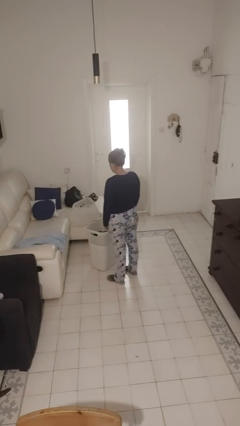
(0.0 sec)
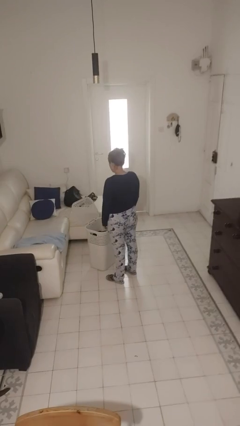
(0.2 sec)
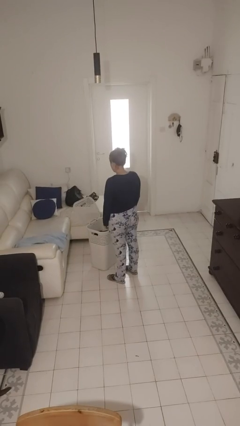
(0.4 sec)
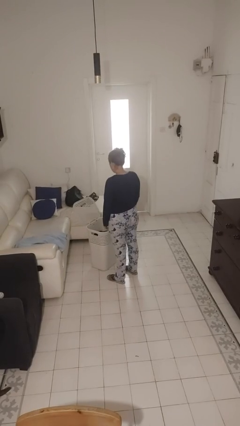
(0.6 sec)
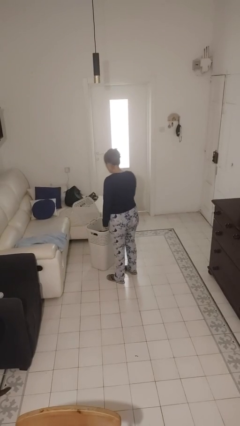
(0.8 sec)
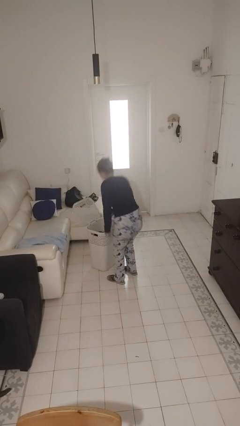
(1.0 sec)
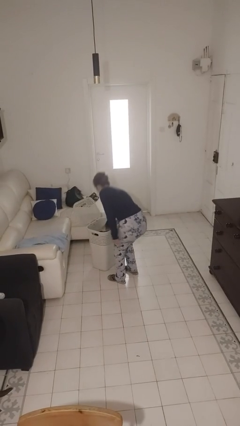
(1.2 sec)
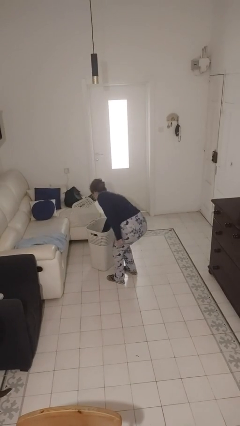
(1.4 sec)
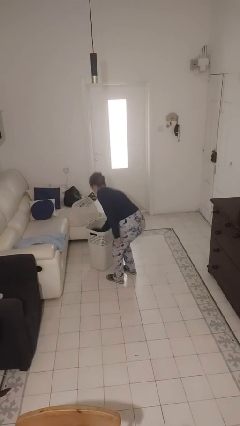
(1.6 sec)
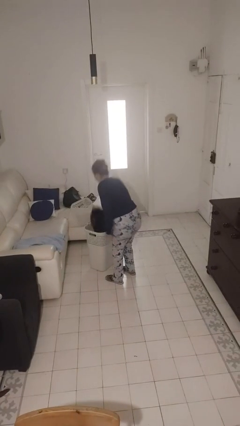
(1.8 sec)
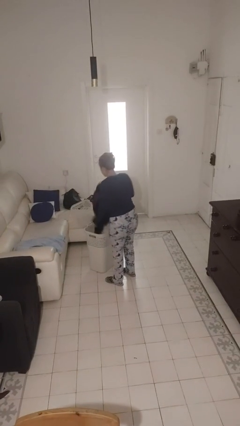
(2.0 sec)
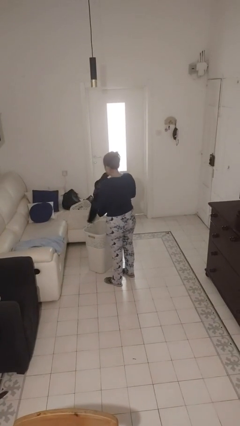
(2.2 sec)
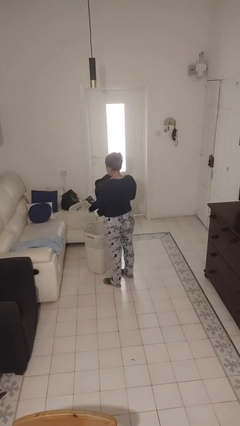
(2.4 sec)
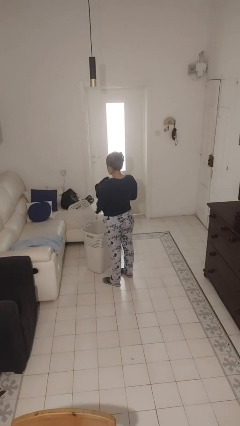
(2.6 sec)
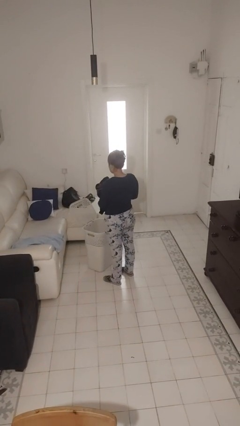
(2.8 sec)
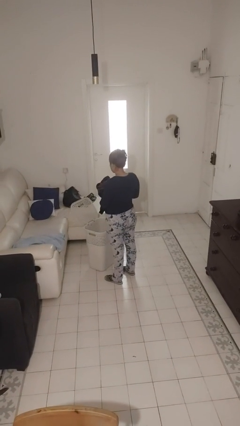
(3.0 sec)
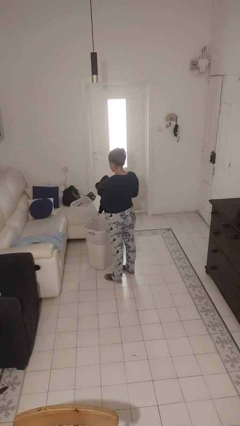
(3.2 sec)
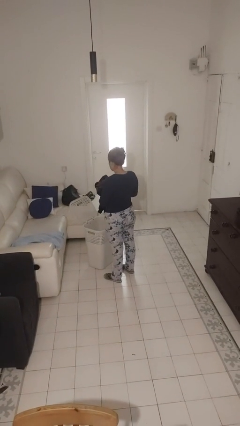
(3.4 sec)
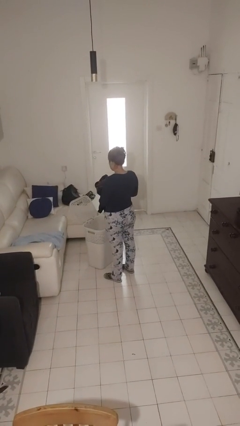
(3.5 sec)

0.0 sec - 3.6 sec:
person takes object from basket

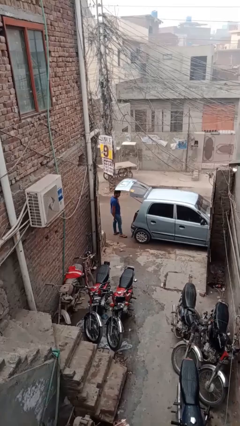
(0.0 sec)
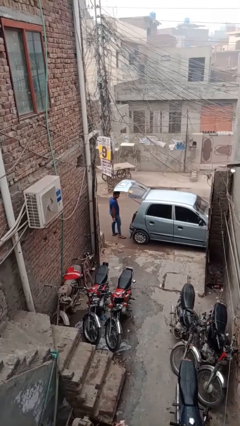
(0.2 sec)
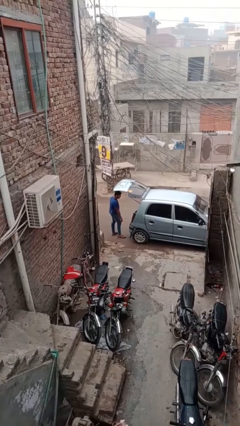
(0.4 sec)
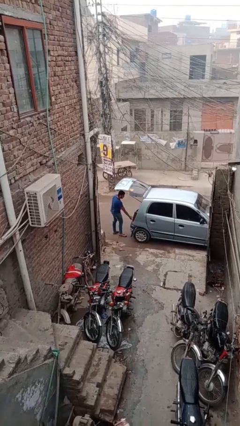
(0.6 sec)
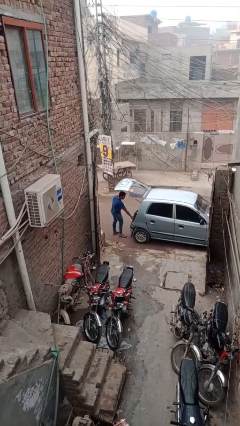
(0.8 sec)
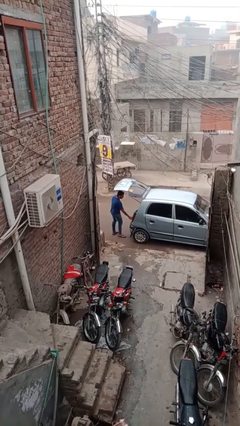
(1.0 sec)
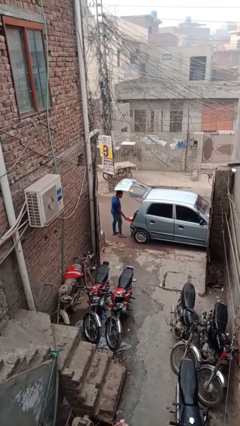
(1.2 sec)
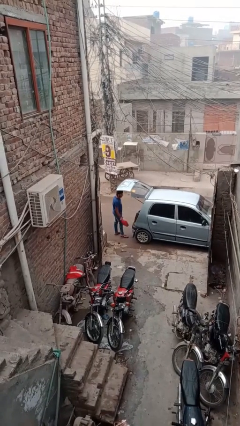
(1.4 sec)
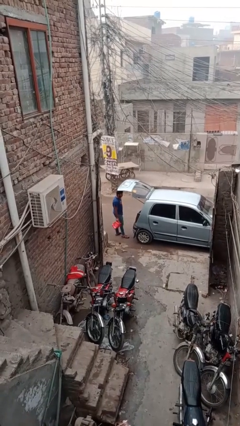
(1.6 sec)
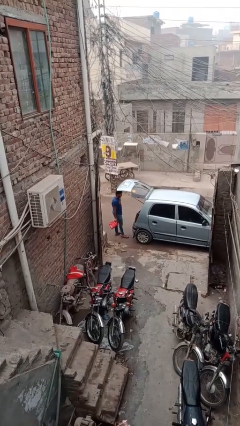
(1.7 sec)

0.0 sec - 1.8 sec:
person unloads car

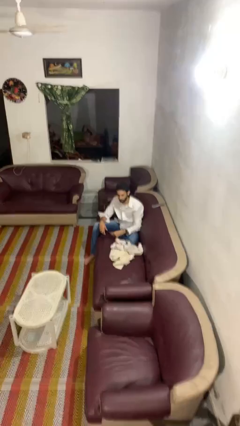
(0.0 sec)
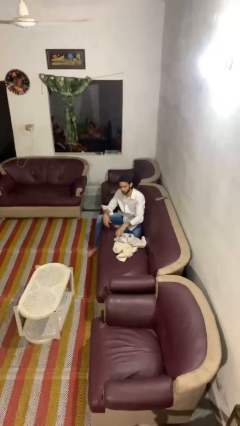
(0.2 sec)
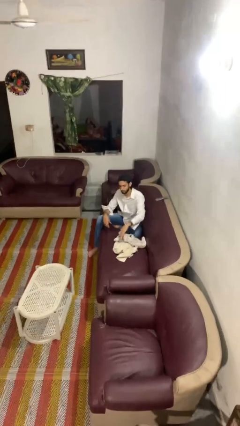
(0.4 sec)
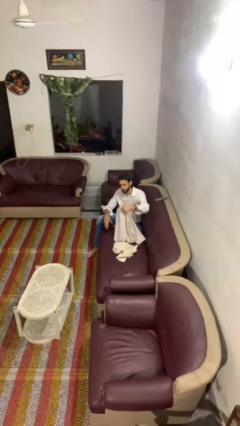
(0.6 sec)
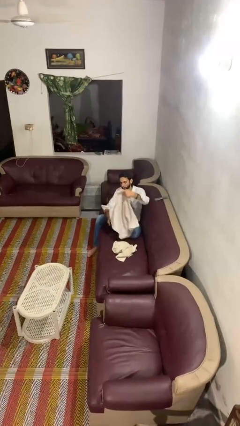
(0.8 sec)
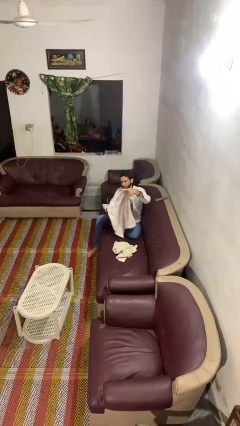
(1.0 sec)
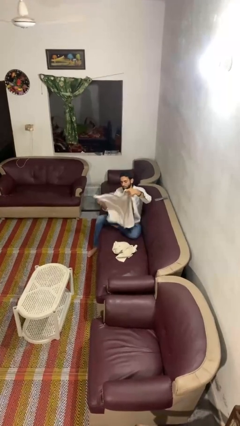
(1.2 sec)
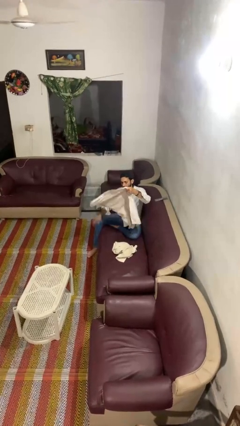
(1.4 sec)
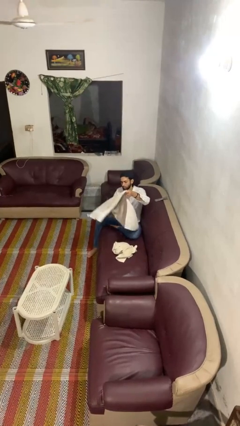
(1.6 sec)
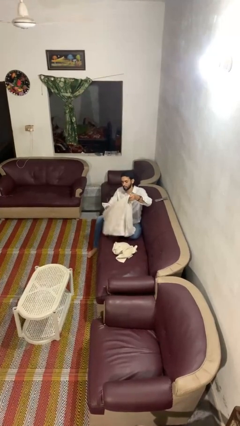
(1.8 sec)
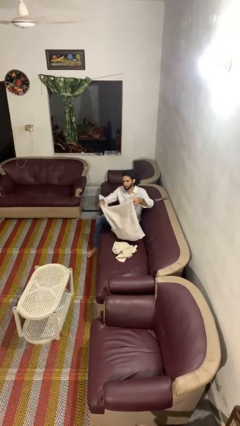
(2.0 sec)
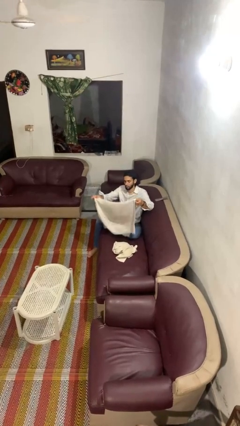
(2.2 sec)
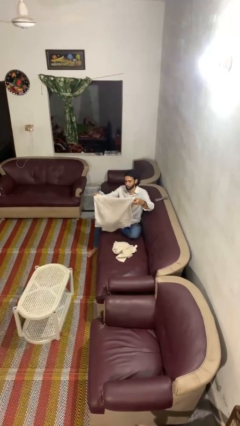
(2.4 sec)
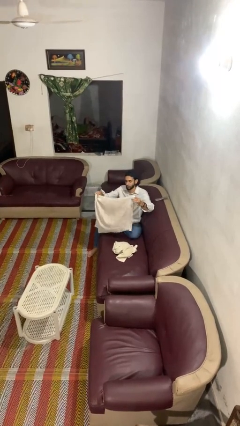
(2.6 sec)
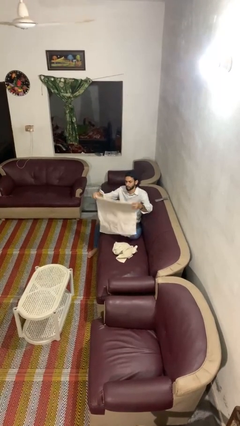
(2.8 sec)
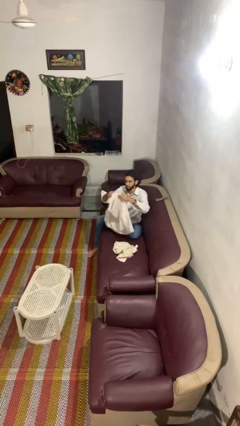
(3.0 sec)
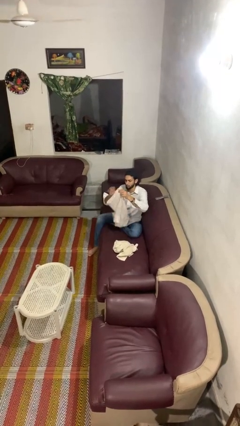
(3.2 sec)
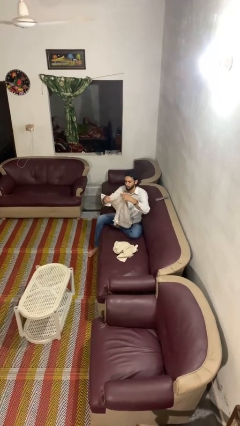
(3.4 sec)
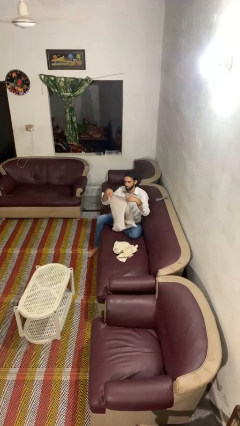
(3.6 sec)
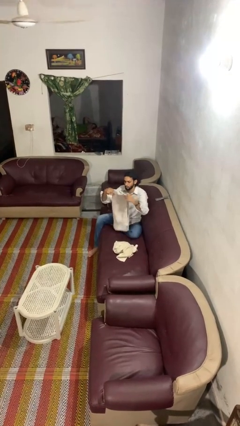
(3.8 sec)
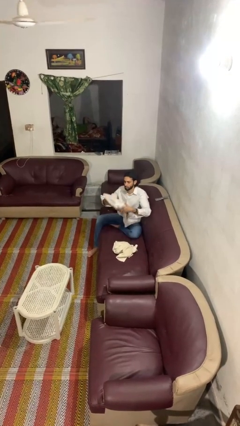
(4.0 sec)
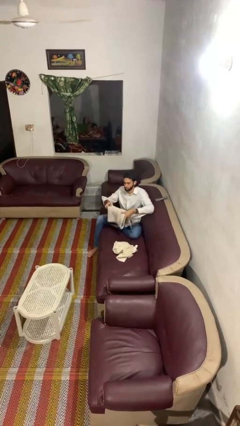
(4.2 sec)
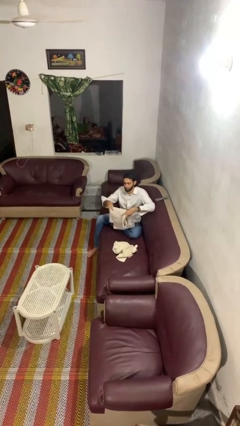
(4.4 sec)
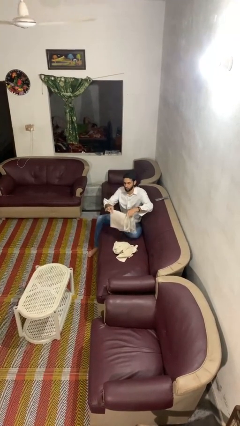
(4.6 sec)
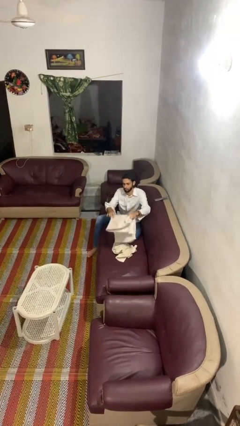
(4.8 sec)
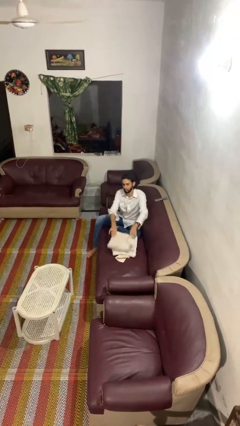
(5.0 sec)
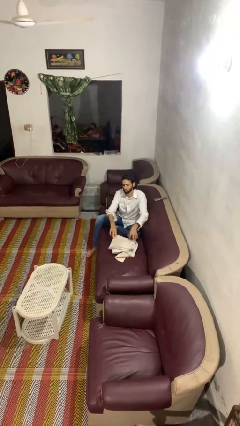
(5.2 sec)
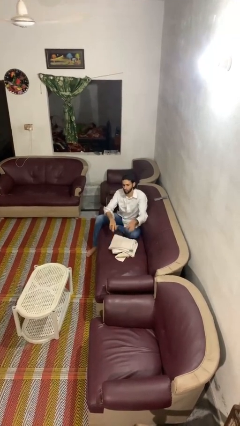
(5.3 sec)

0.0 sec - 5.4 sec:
person folds towel

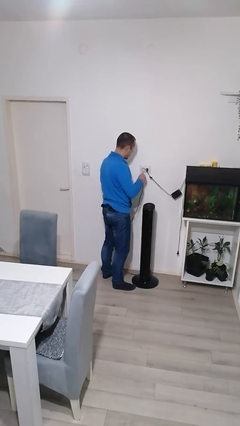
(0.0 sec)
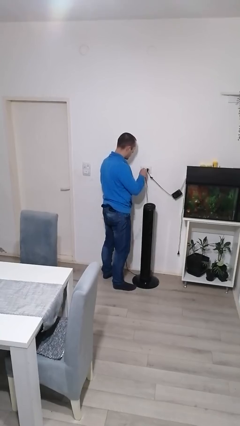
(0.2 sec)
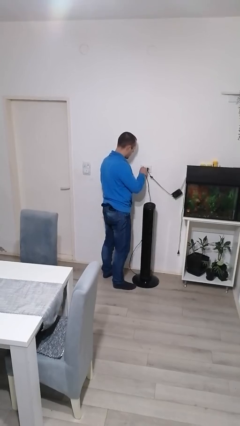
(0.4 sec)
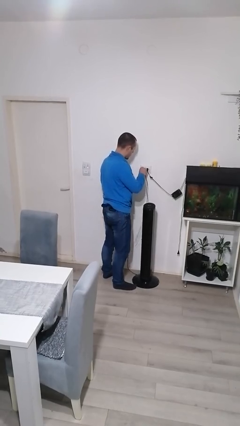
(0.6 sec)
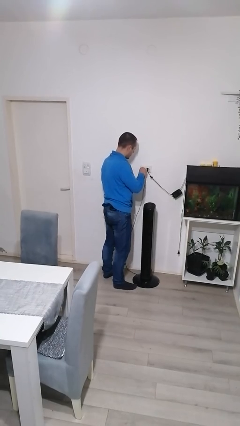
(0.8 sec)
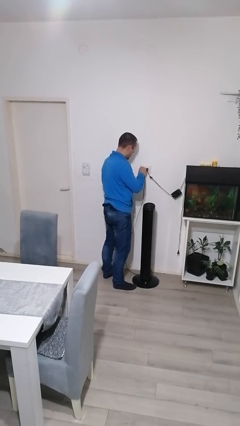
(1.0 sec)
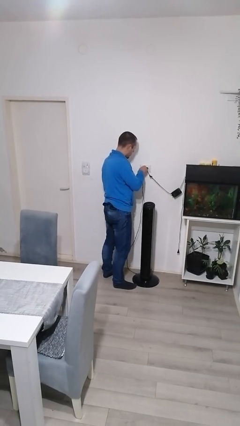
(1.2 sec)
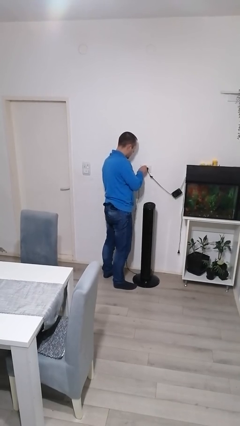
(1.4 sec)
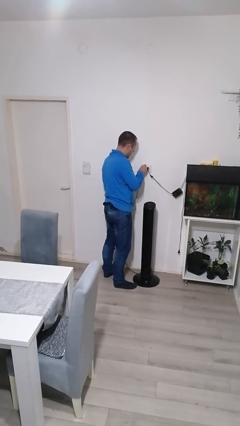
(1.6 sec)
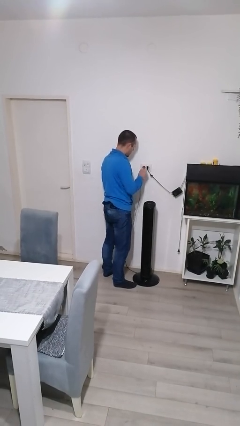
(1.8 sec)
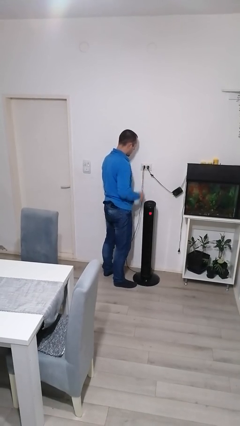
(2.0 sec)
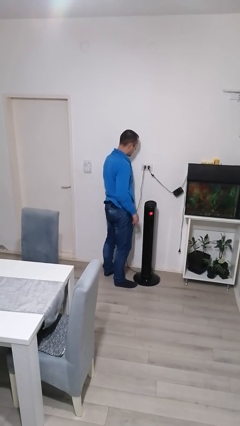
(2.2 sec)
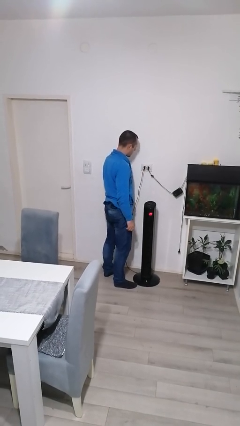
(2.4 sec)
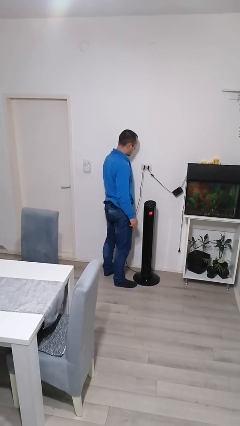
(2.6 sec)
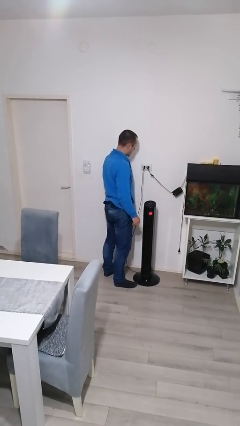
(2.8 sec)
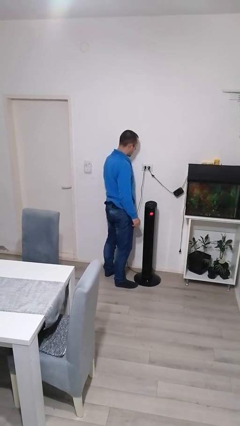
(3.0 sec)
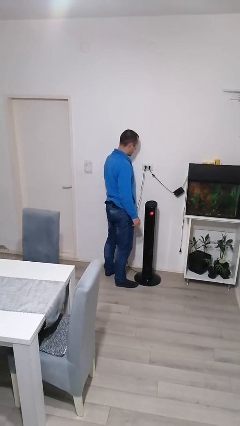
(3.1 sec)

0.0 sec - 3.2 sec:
person plugs into electrical socket

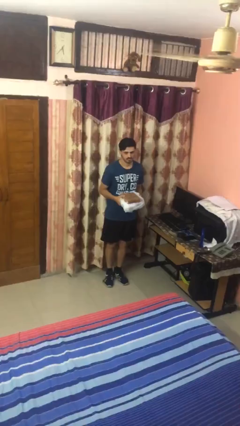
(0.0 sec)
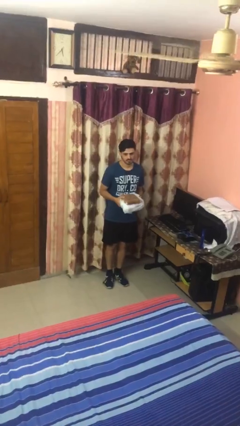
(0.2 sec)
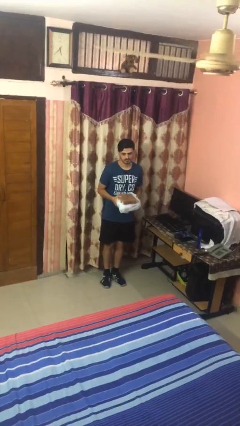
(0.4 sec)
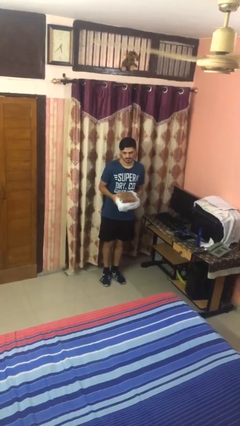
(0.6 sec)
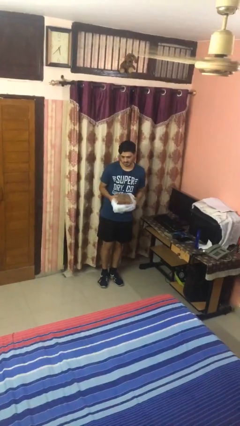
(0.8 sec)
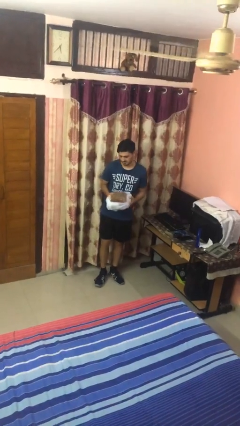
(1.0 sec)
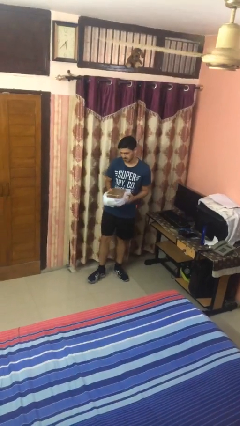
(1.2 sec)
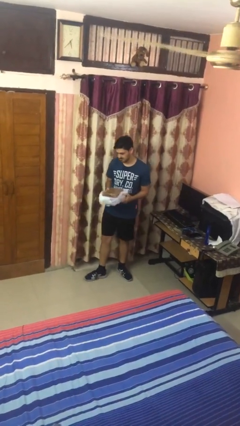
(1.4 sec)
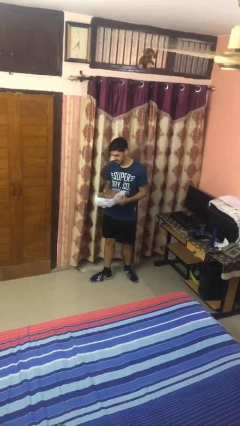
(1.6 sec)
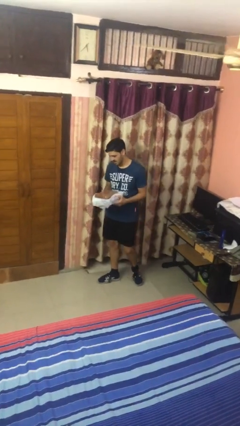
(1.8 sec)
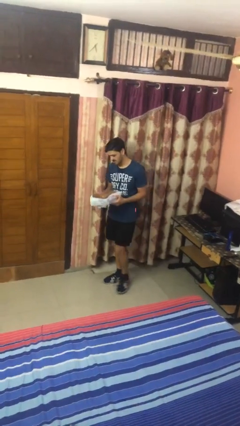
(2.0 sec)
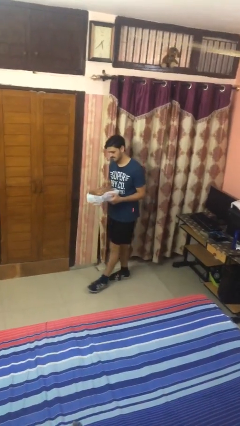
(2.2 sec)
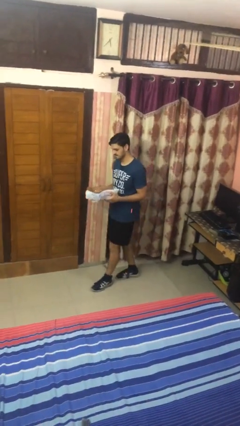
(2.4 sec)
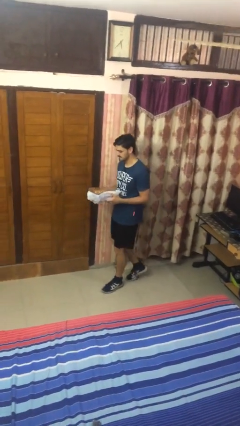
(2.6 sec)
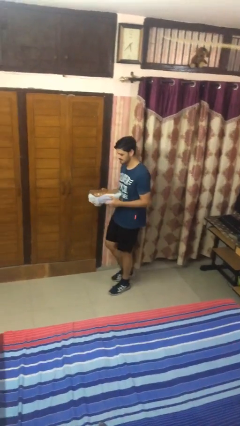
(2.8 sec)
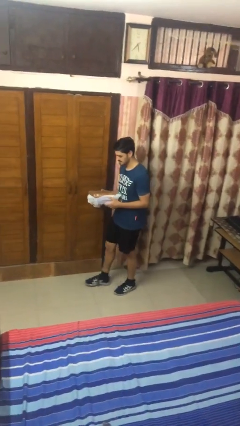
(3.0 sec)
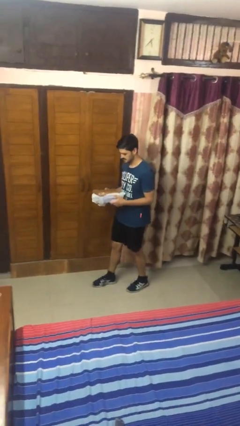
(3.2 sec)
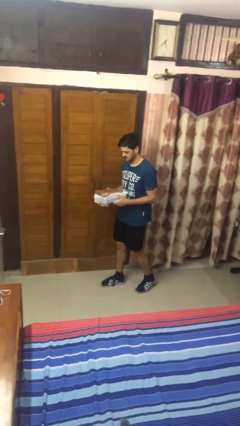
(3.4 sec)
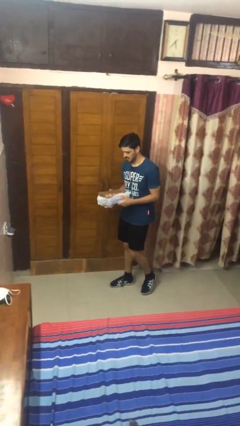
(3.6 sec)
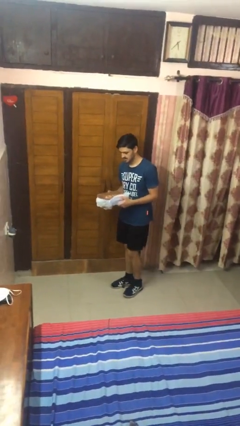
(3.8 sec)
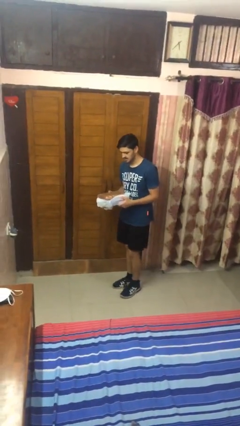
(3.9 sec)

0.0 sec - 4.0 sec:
person carries groceries
